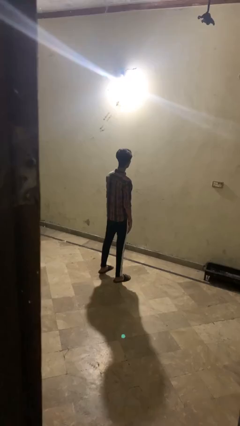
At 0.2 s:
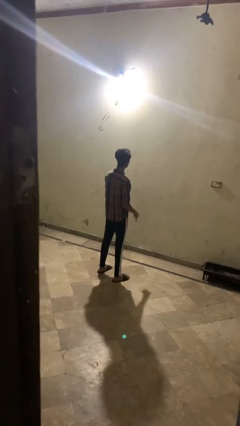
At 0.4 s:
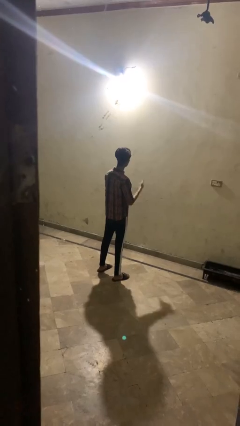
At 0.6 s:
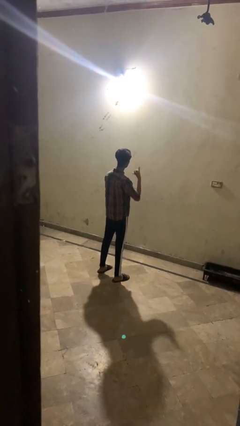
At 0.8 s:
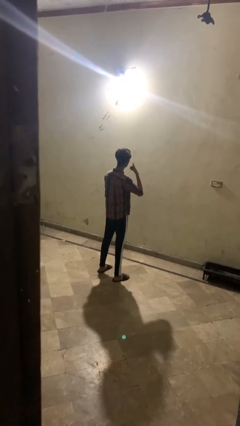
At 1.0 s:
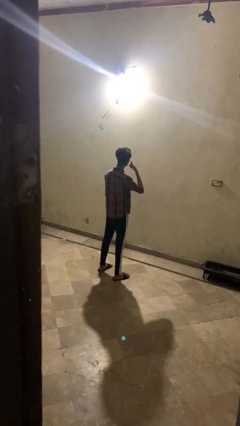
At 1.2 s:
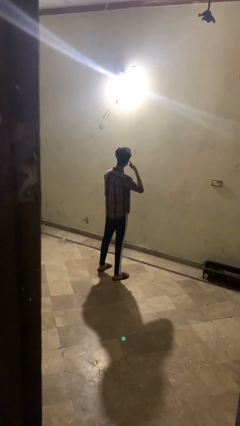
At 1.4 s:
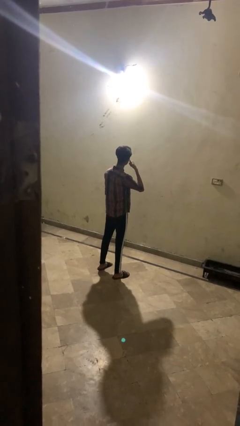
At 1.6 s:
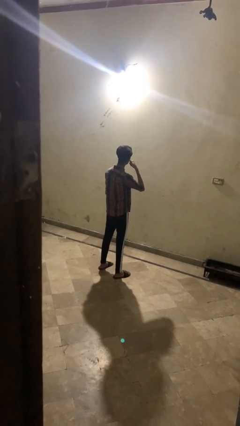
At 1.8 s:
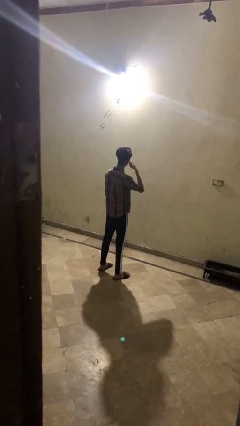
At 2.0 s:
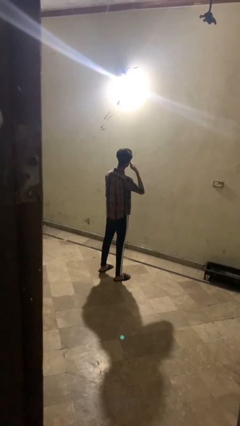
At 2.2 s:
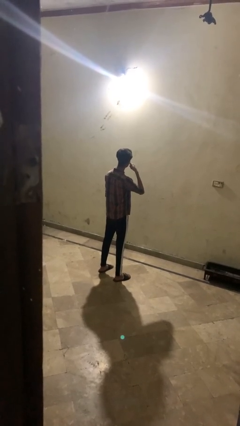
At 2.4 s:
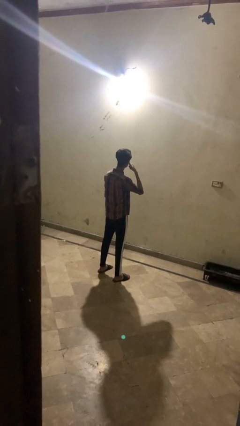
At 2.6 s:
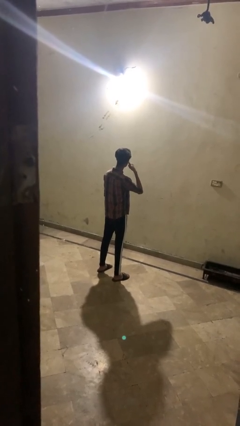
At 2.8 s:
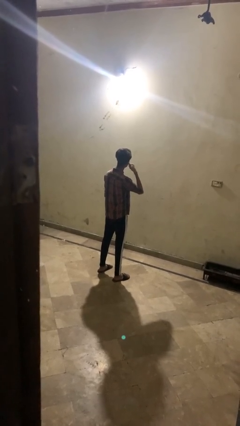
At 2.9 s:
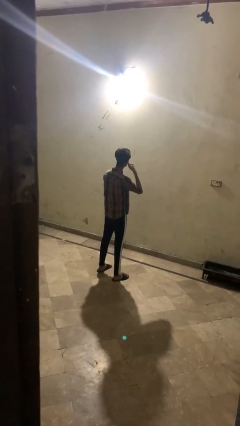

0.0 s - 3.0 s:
person gestures call me

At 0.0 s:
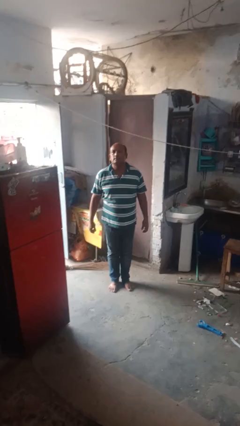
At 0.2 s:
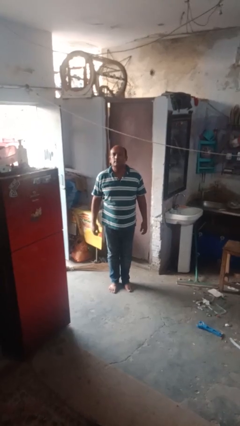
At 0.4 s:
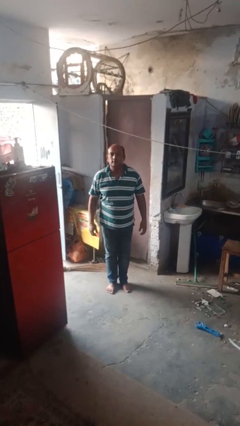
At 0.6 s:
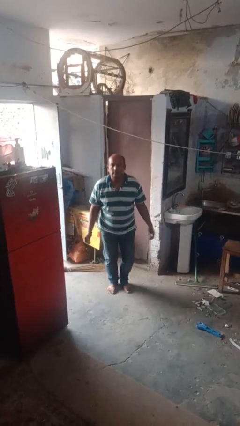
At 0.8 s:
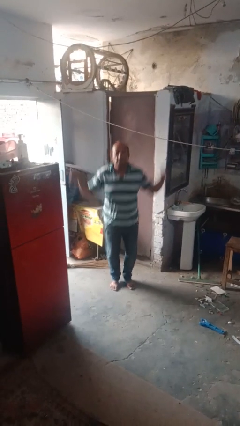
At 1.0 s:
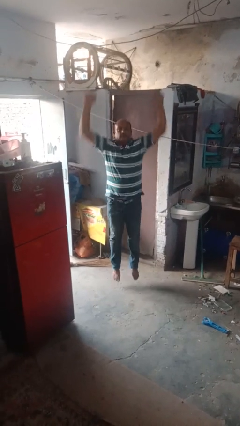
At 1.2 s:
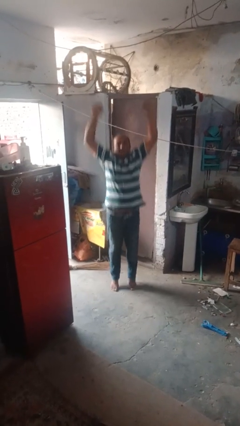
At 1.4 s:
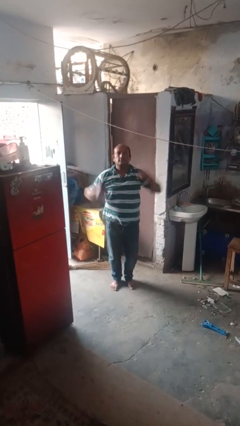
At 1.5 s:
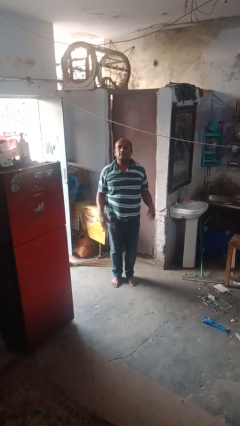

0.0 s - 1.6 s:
person jumps

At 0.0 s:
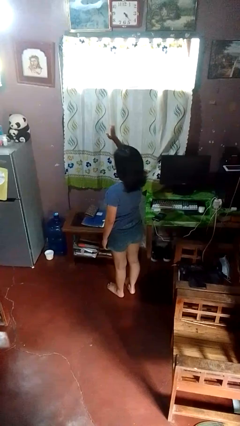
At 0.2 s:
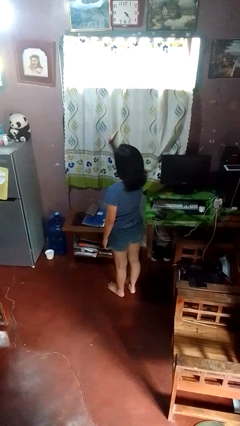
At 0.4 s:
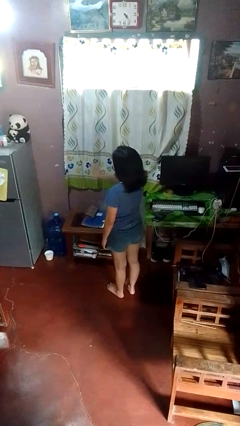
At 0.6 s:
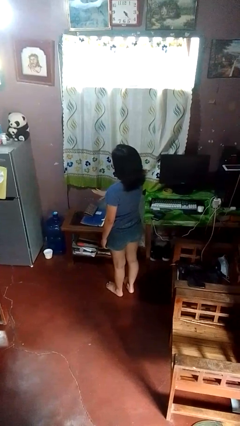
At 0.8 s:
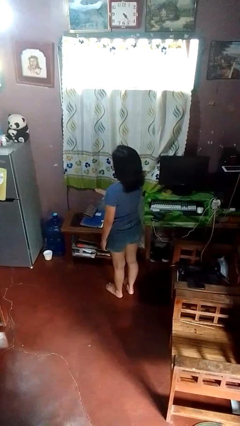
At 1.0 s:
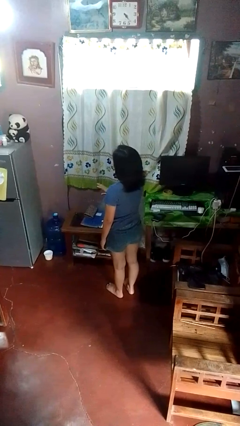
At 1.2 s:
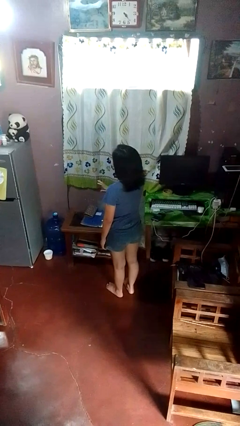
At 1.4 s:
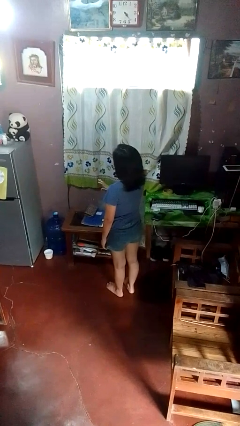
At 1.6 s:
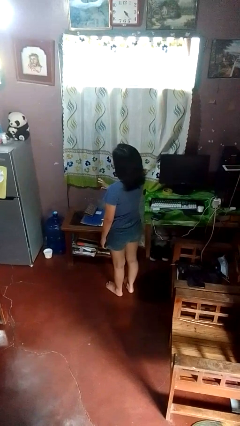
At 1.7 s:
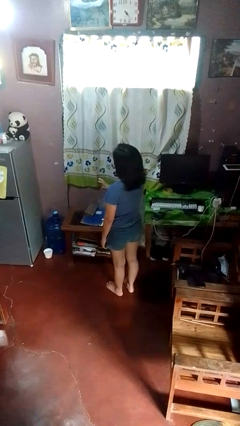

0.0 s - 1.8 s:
person gestures swipe down

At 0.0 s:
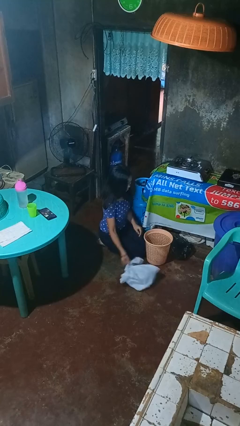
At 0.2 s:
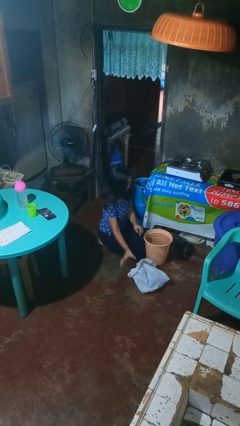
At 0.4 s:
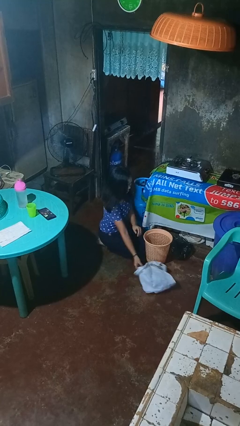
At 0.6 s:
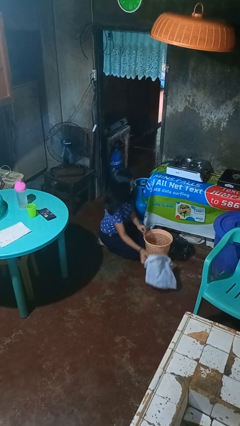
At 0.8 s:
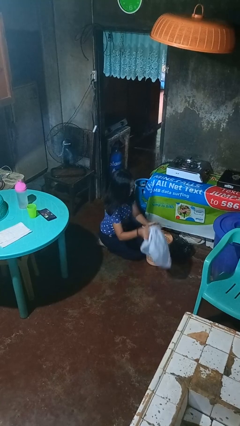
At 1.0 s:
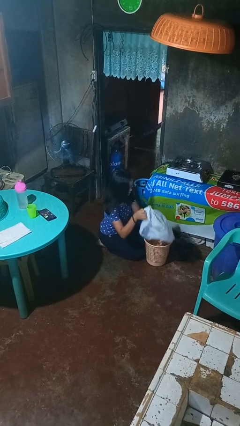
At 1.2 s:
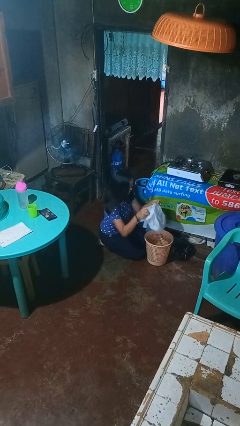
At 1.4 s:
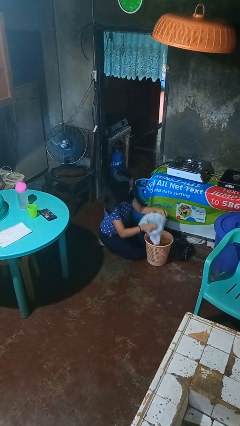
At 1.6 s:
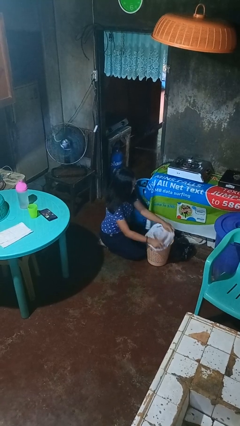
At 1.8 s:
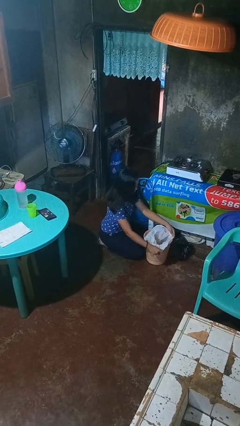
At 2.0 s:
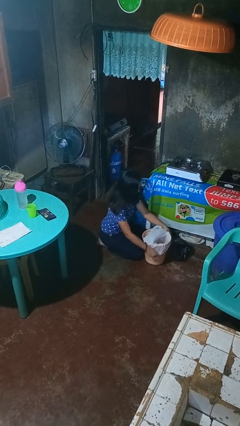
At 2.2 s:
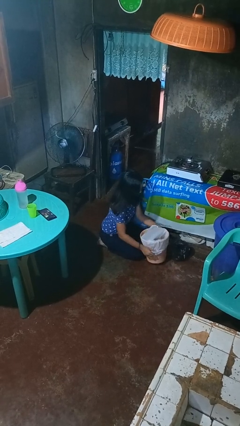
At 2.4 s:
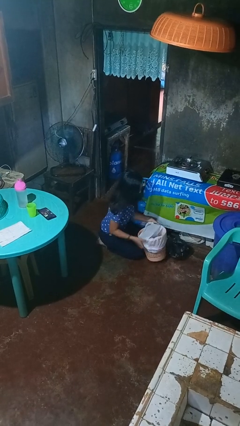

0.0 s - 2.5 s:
person inserts trashbag into trashcan

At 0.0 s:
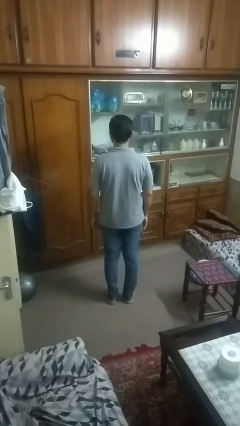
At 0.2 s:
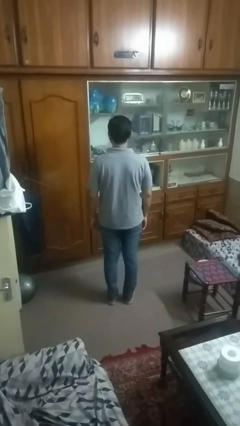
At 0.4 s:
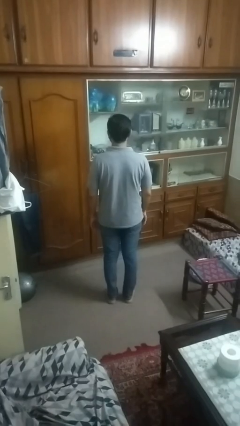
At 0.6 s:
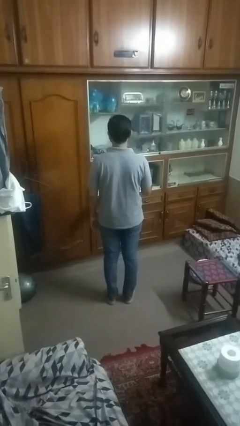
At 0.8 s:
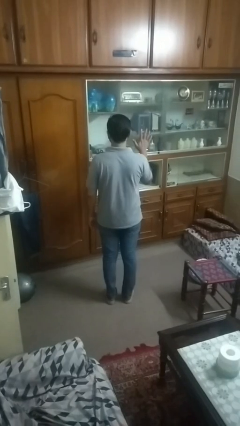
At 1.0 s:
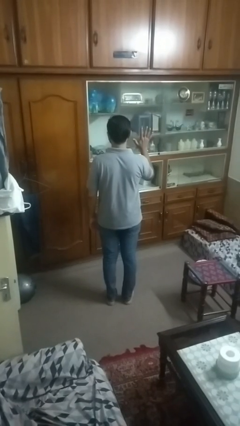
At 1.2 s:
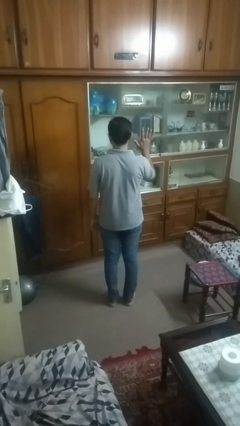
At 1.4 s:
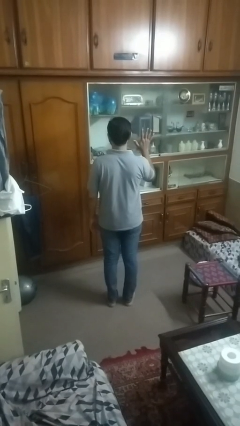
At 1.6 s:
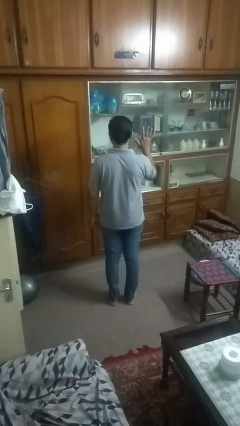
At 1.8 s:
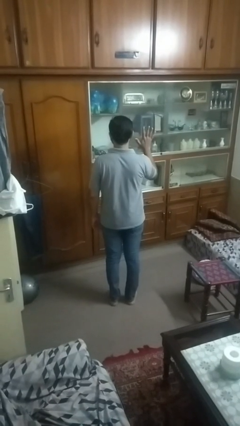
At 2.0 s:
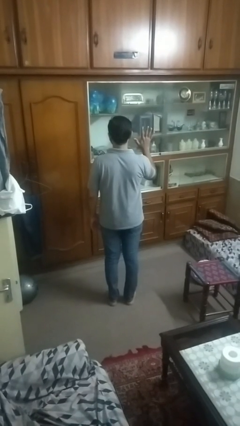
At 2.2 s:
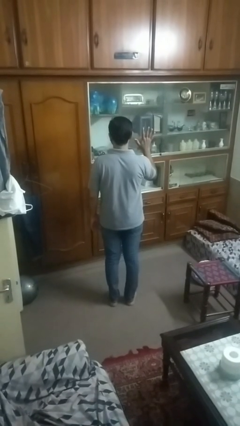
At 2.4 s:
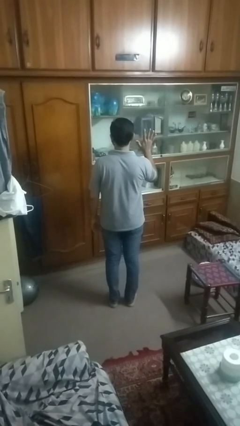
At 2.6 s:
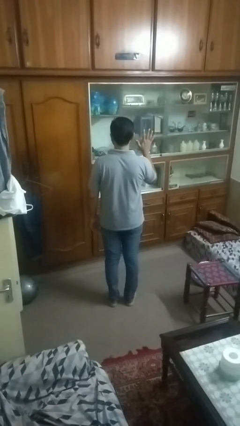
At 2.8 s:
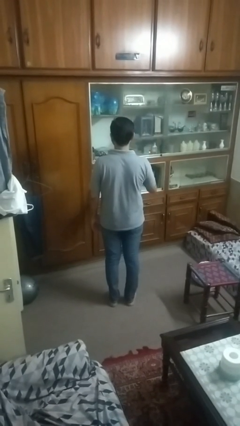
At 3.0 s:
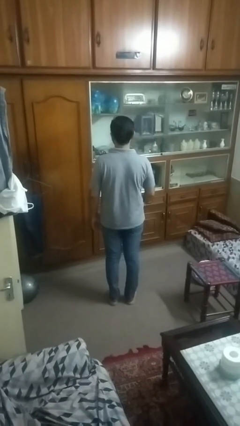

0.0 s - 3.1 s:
person gestures number five

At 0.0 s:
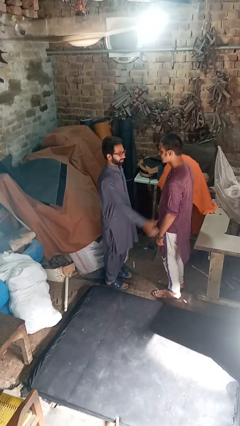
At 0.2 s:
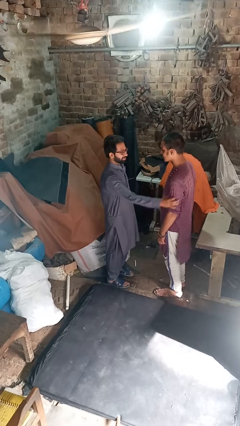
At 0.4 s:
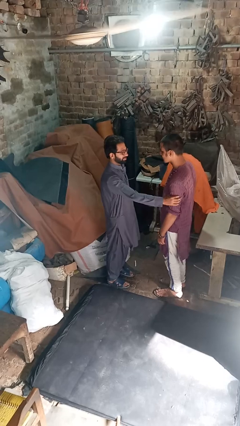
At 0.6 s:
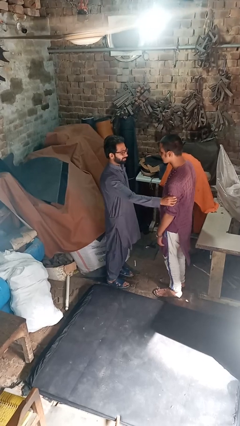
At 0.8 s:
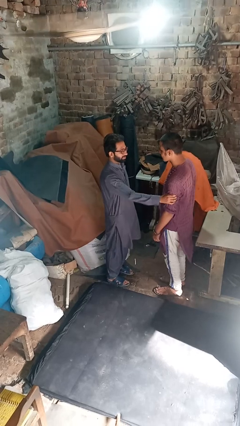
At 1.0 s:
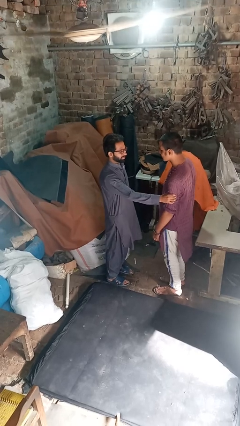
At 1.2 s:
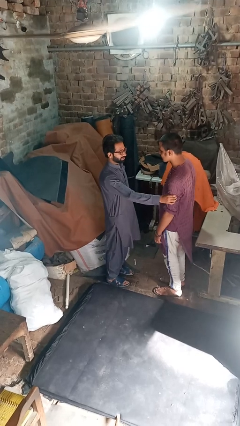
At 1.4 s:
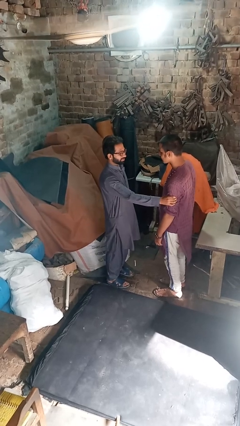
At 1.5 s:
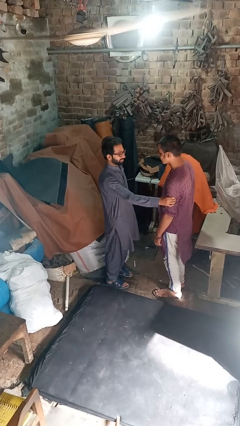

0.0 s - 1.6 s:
person grabs person by forearm

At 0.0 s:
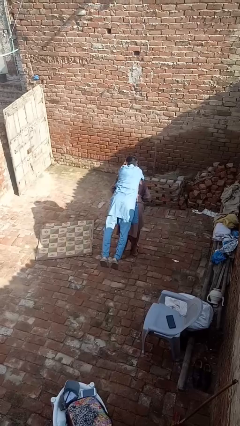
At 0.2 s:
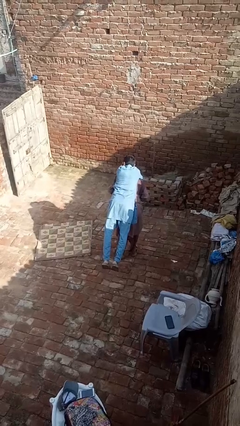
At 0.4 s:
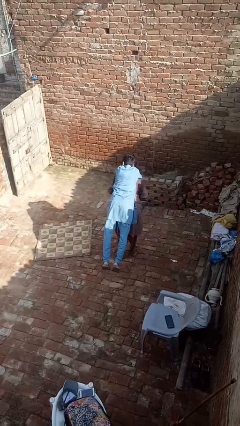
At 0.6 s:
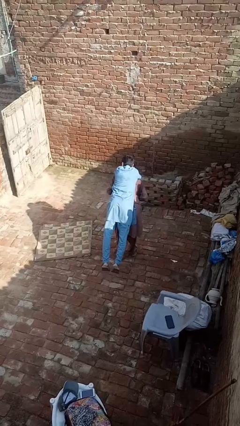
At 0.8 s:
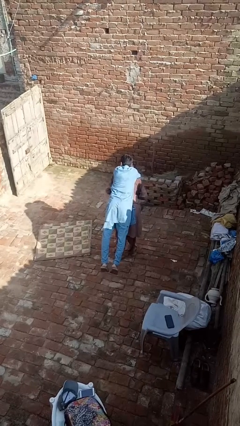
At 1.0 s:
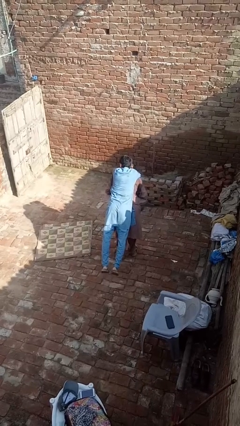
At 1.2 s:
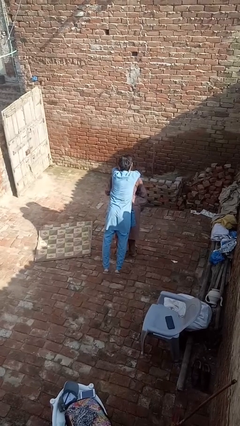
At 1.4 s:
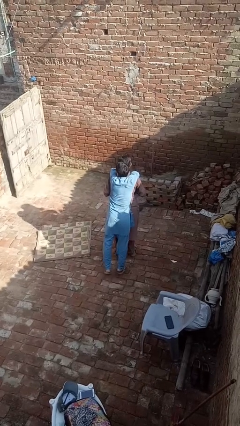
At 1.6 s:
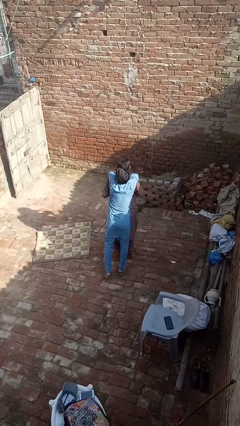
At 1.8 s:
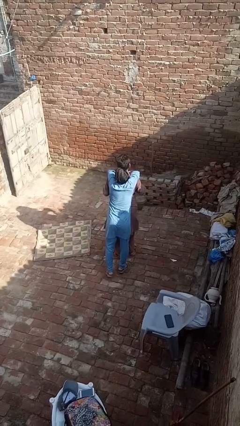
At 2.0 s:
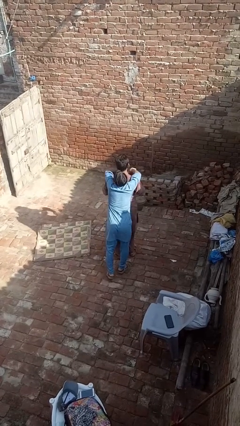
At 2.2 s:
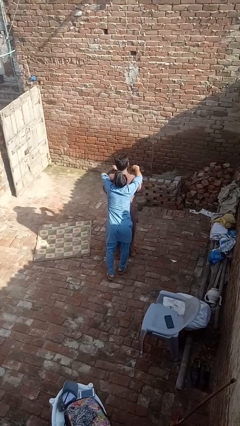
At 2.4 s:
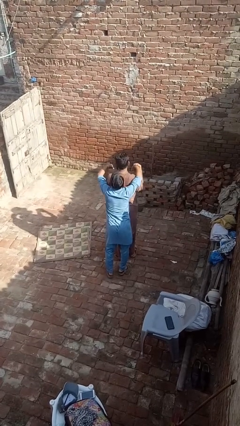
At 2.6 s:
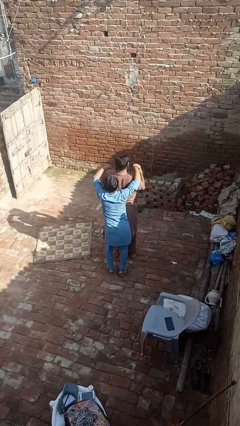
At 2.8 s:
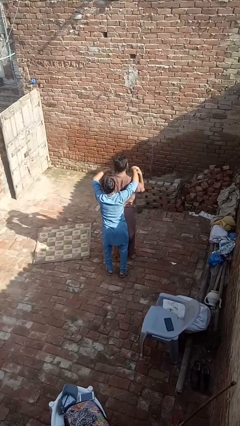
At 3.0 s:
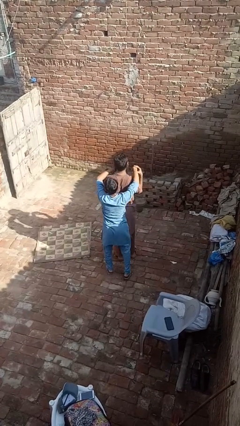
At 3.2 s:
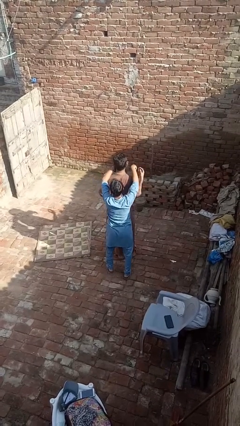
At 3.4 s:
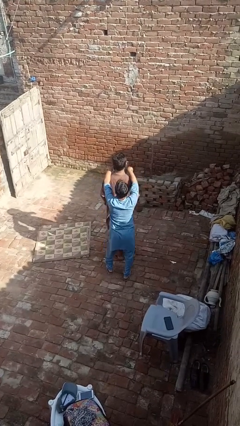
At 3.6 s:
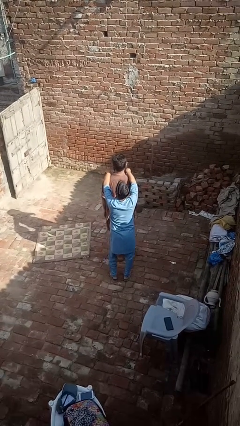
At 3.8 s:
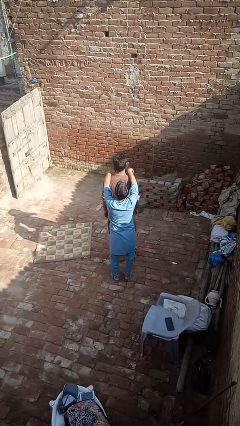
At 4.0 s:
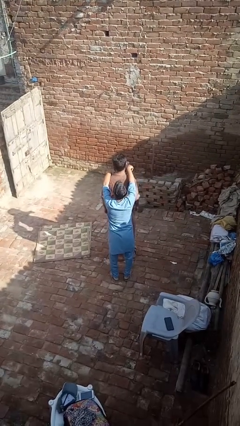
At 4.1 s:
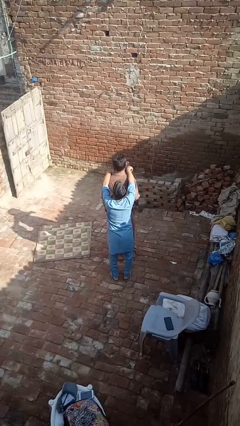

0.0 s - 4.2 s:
person puts down person
